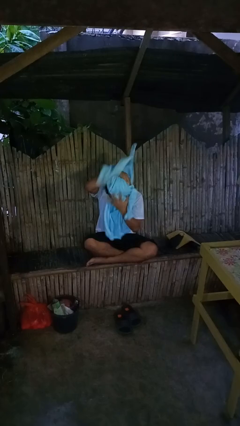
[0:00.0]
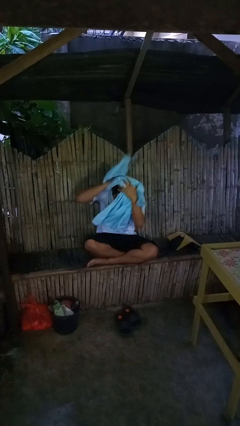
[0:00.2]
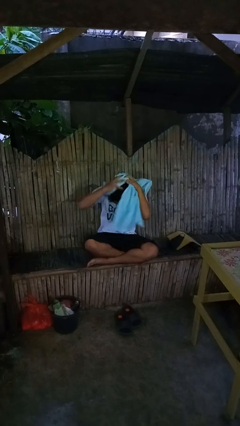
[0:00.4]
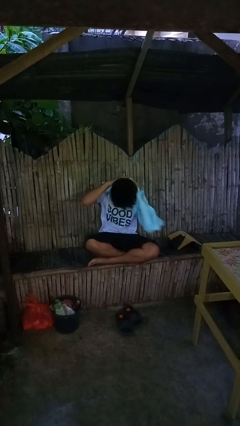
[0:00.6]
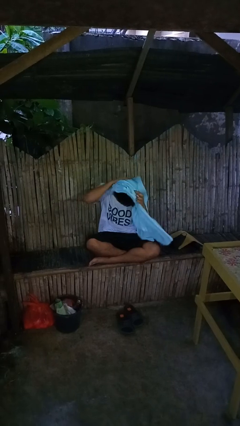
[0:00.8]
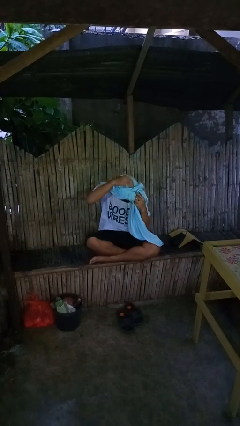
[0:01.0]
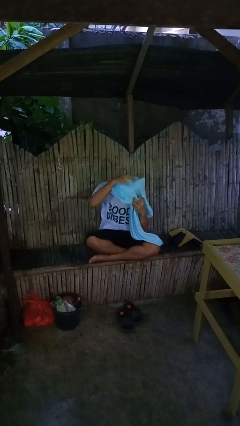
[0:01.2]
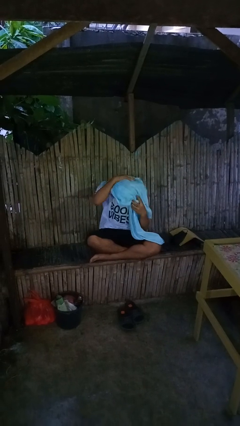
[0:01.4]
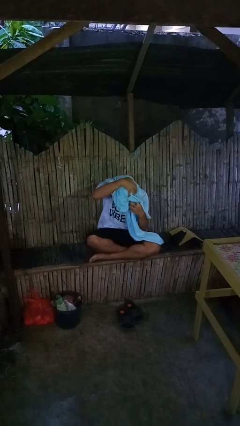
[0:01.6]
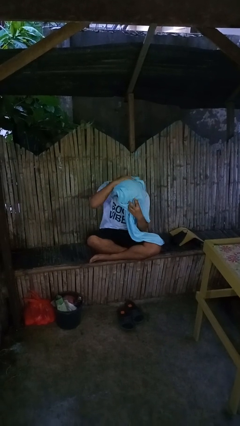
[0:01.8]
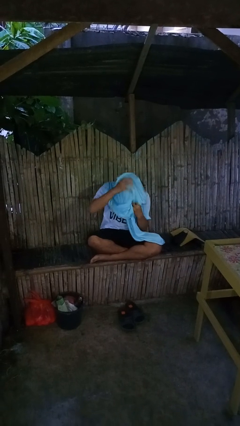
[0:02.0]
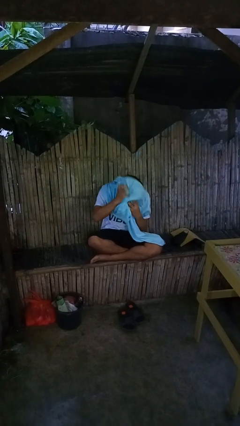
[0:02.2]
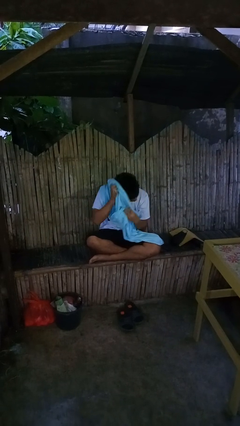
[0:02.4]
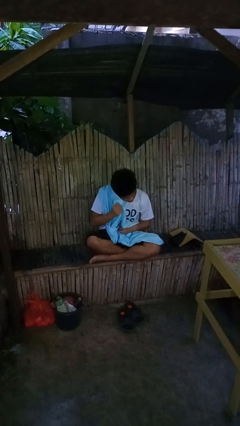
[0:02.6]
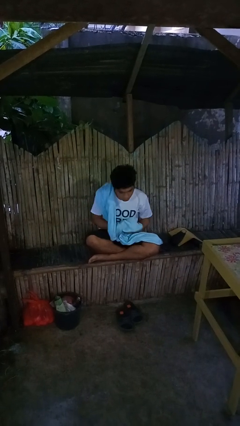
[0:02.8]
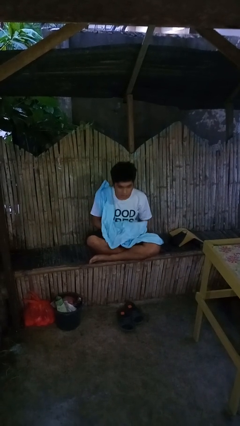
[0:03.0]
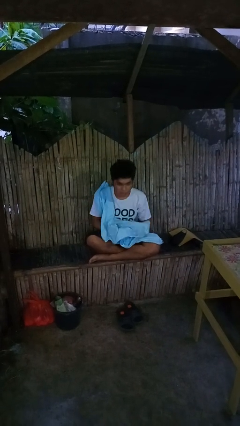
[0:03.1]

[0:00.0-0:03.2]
person dries hair with towel

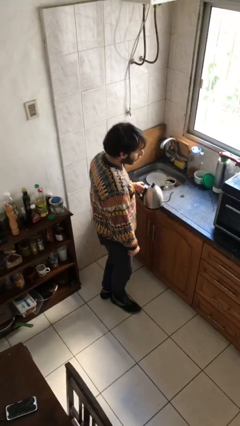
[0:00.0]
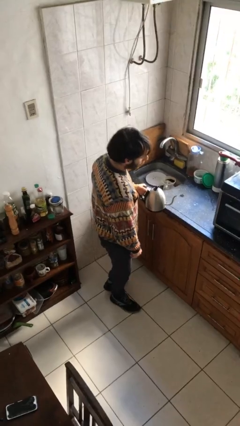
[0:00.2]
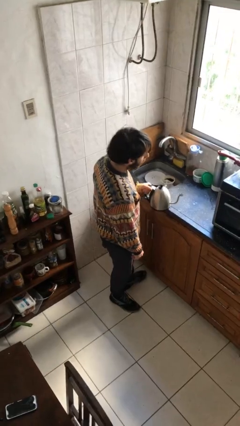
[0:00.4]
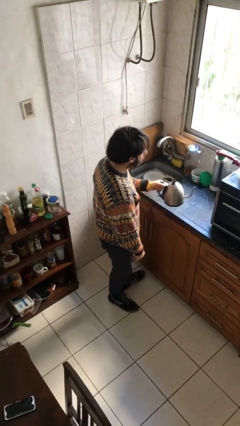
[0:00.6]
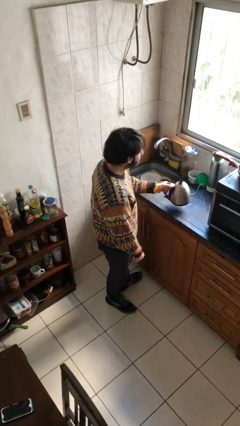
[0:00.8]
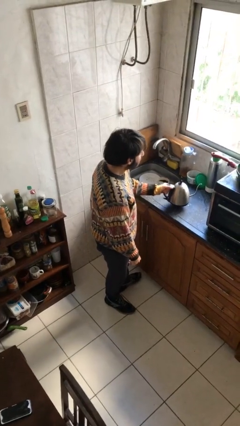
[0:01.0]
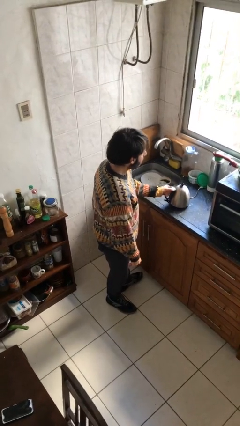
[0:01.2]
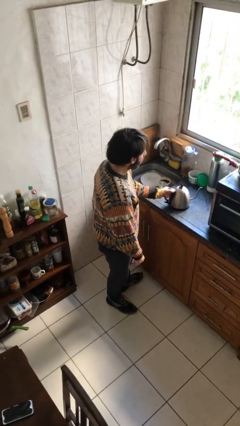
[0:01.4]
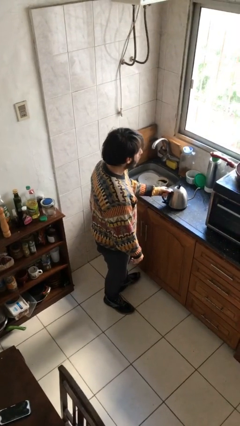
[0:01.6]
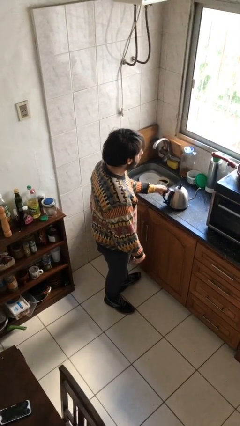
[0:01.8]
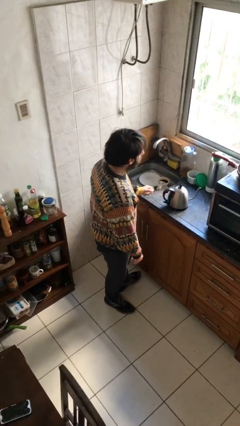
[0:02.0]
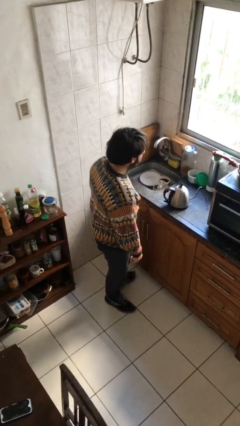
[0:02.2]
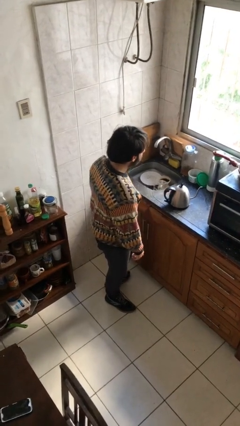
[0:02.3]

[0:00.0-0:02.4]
person puts down object on countertop

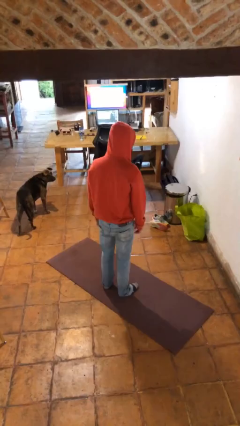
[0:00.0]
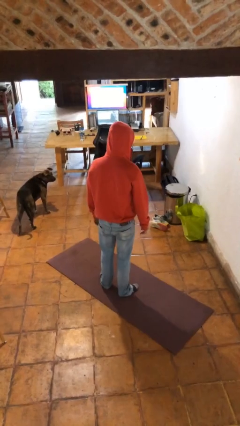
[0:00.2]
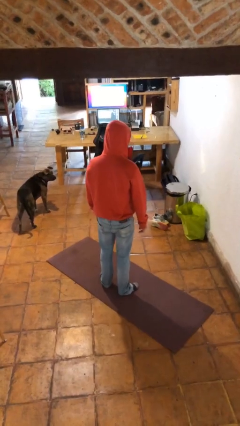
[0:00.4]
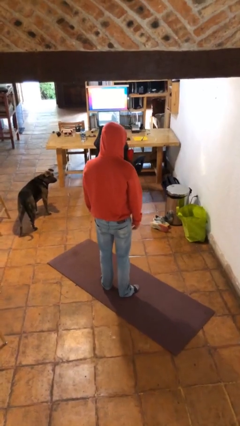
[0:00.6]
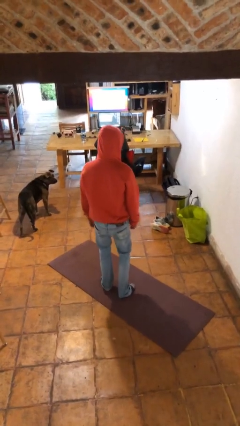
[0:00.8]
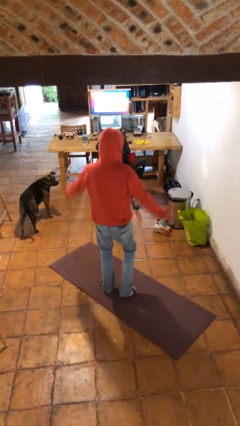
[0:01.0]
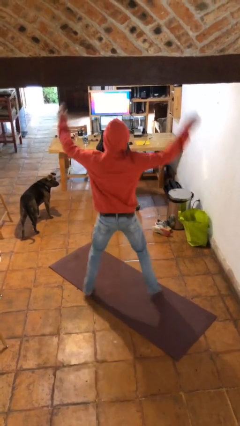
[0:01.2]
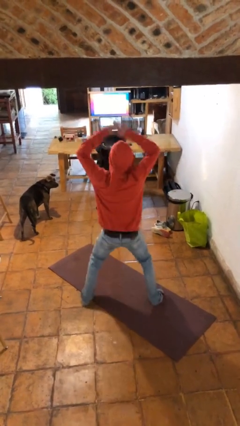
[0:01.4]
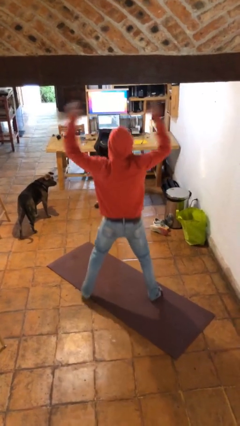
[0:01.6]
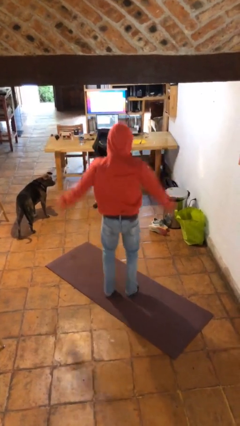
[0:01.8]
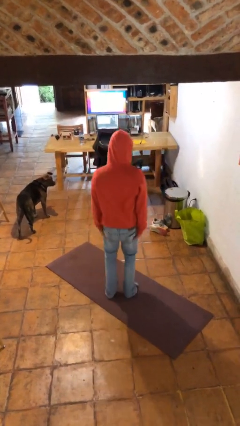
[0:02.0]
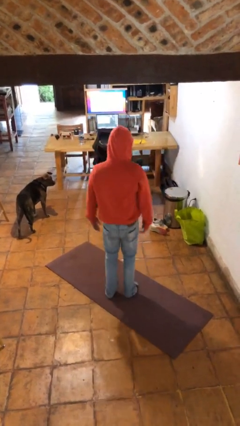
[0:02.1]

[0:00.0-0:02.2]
person exercises with jumping jacks

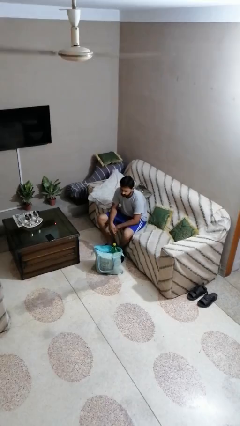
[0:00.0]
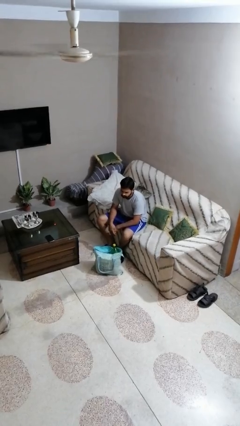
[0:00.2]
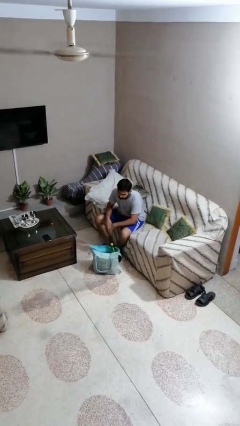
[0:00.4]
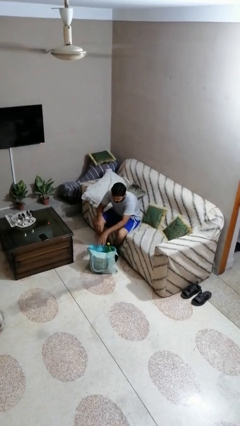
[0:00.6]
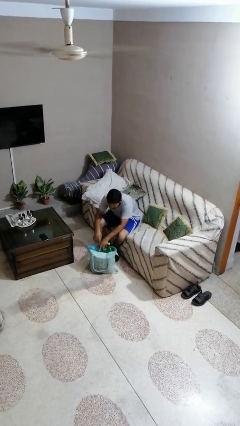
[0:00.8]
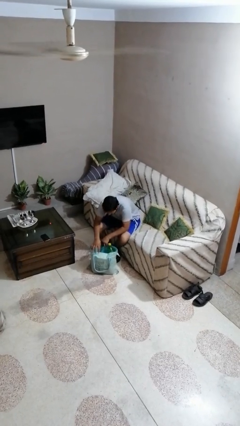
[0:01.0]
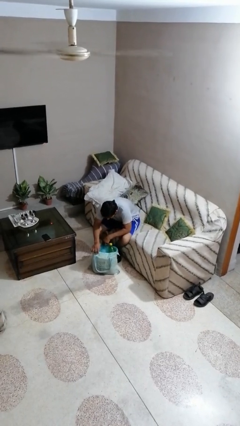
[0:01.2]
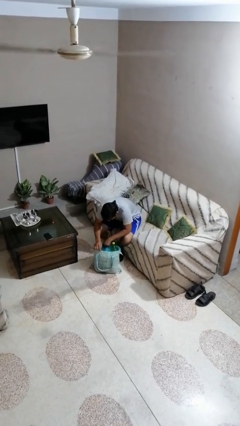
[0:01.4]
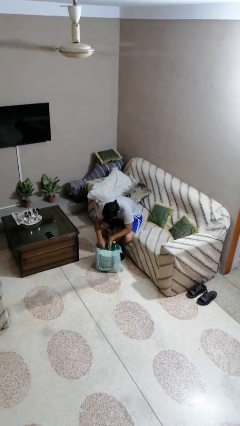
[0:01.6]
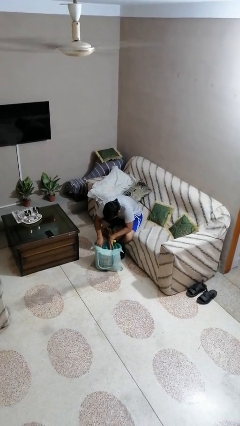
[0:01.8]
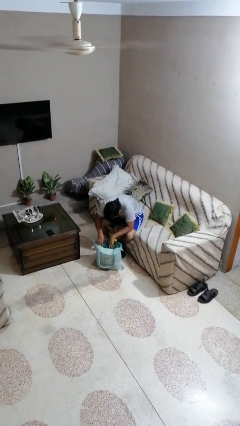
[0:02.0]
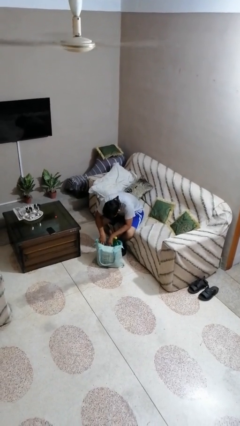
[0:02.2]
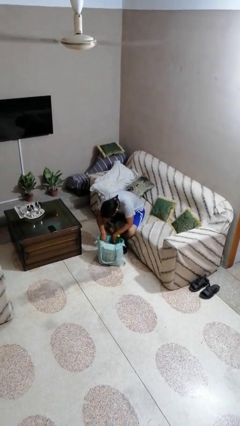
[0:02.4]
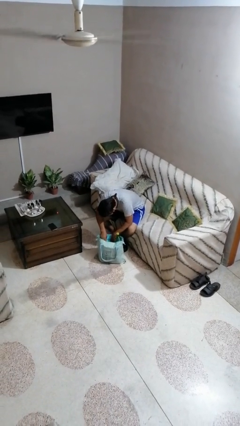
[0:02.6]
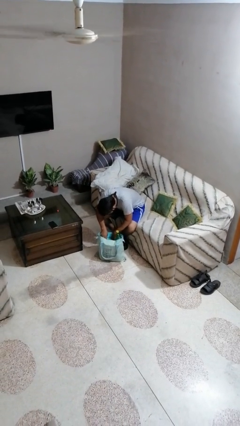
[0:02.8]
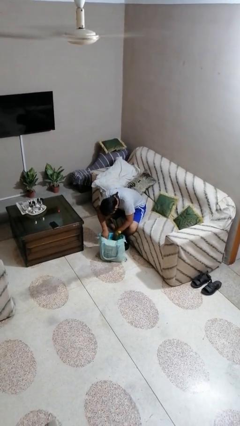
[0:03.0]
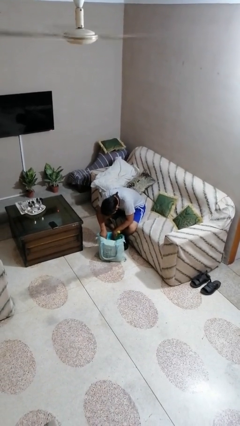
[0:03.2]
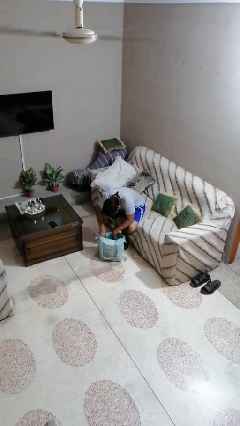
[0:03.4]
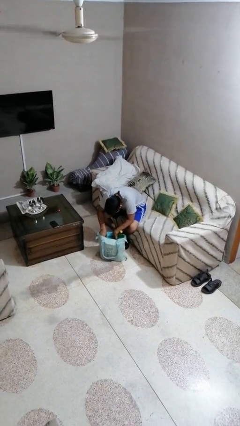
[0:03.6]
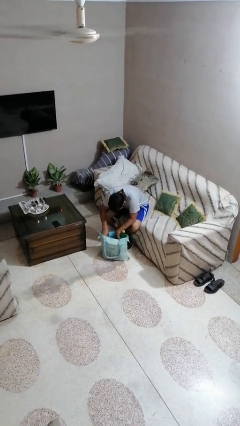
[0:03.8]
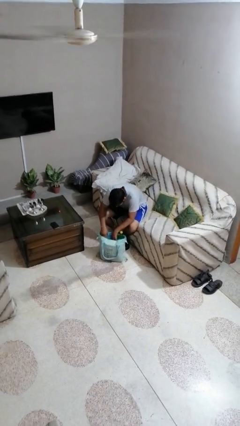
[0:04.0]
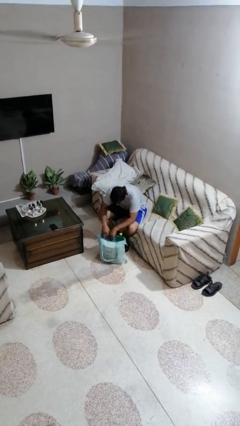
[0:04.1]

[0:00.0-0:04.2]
person searches in bag

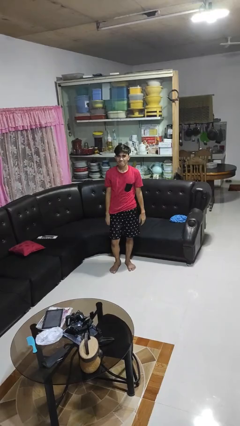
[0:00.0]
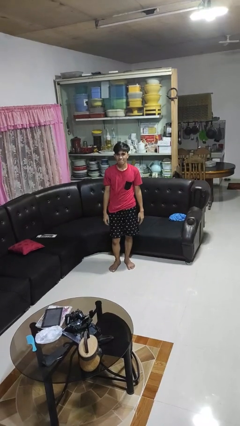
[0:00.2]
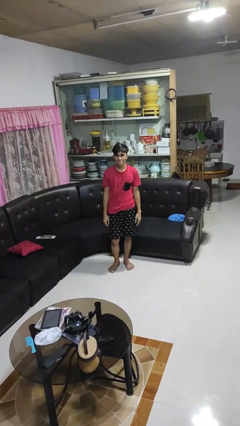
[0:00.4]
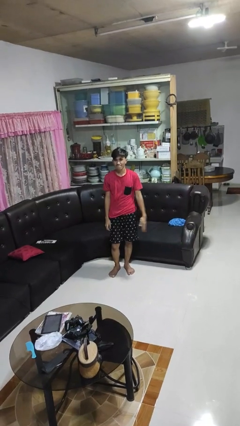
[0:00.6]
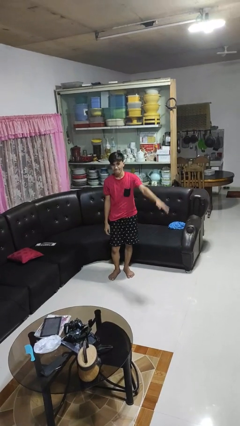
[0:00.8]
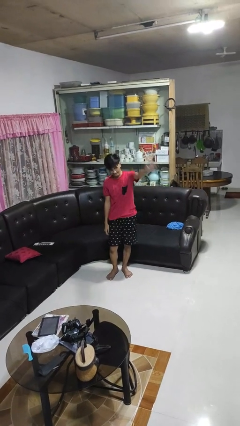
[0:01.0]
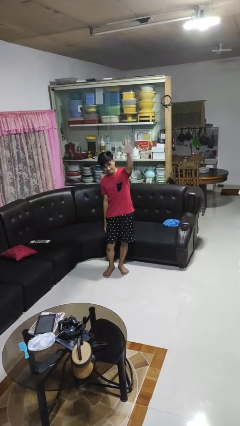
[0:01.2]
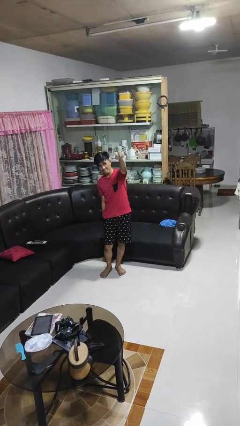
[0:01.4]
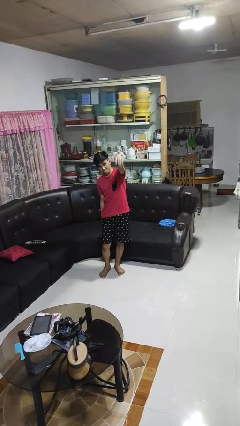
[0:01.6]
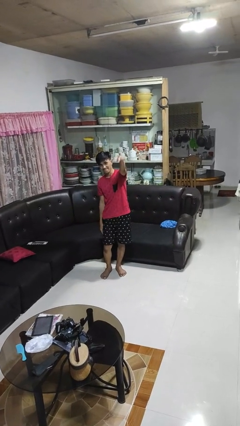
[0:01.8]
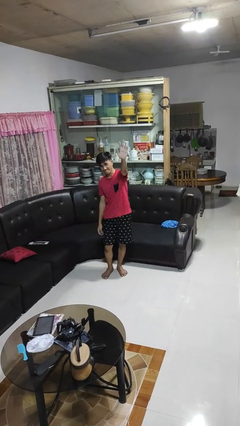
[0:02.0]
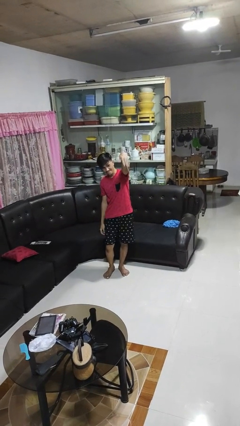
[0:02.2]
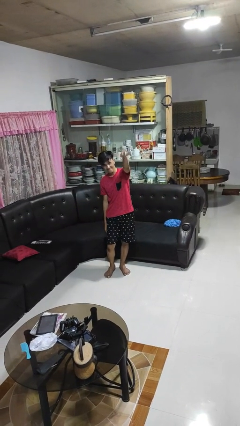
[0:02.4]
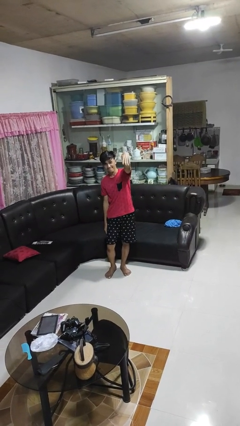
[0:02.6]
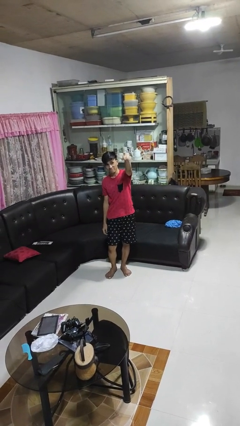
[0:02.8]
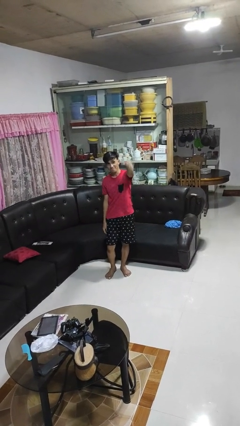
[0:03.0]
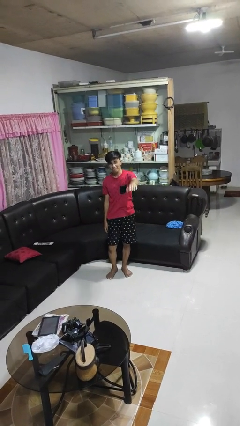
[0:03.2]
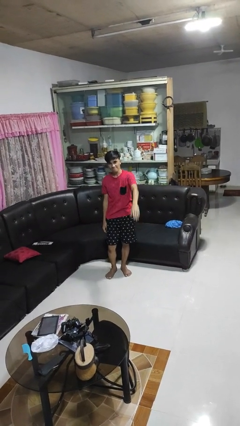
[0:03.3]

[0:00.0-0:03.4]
person gestures come here

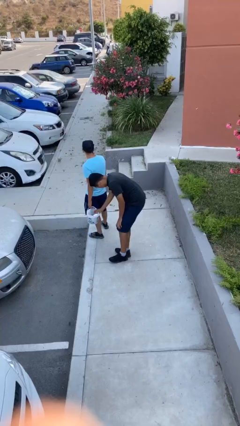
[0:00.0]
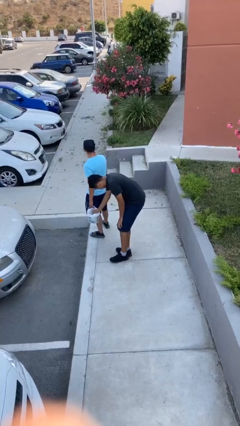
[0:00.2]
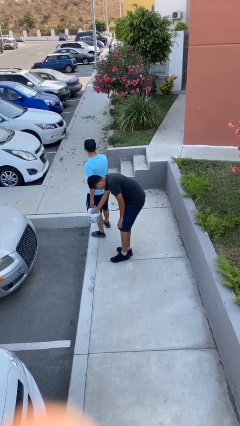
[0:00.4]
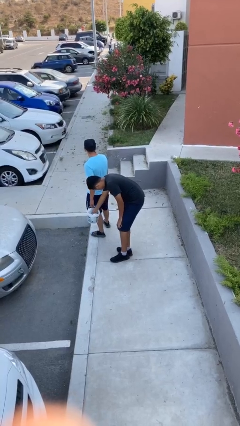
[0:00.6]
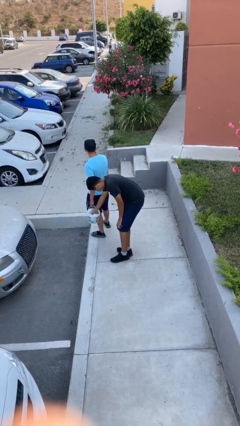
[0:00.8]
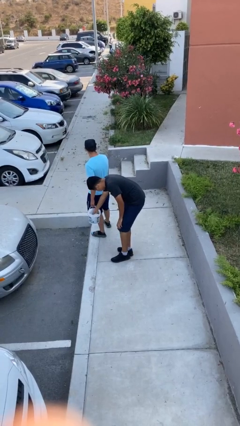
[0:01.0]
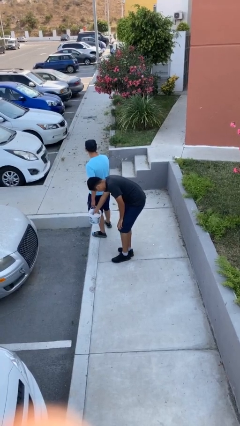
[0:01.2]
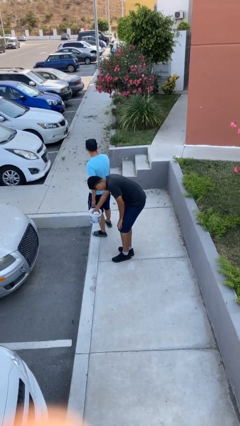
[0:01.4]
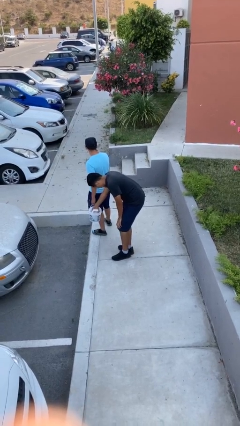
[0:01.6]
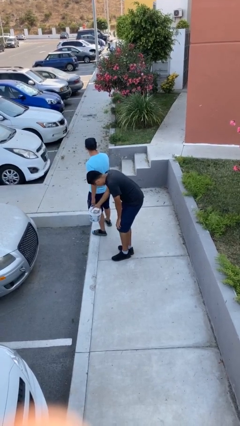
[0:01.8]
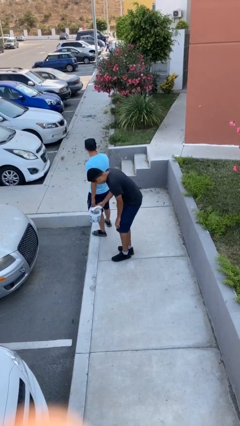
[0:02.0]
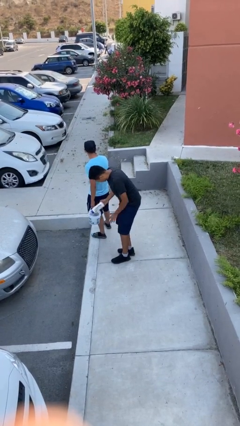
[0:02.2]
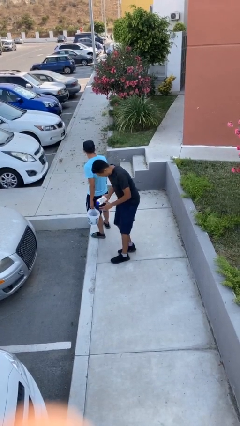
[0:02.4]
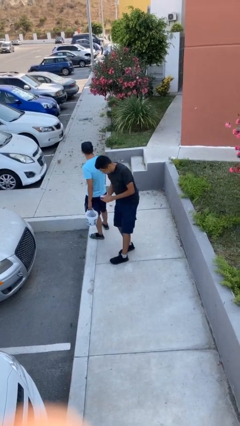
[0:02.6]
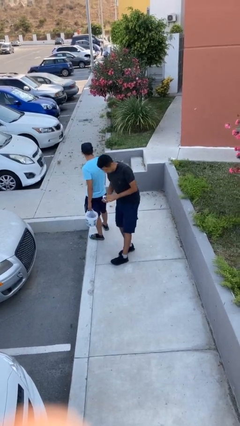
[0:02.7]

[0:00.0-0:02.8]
person steals object from person
